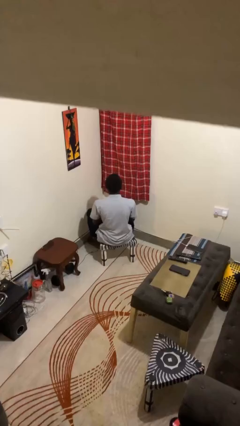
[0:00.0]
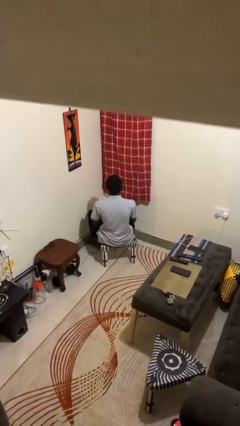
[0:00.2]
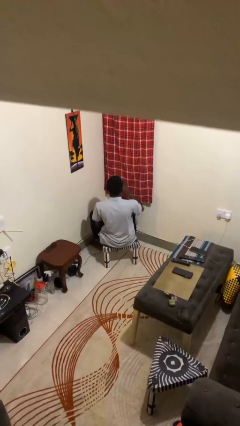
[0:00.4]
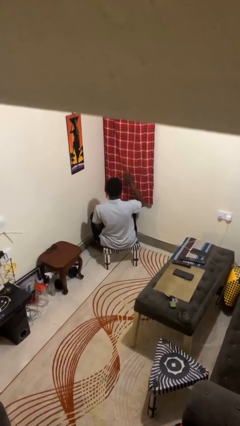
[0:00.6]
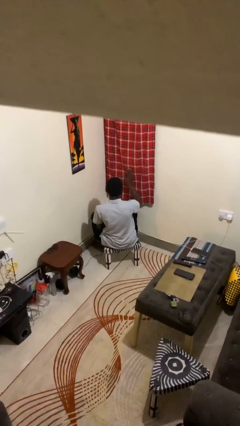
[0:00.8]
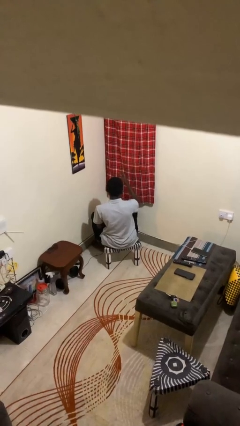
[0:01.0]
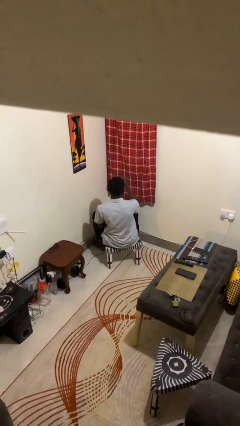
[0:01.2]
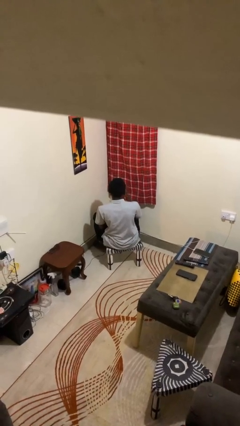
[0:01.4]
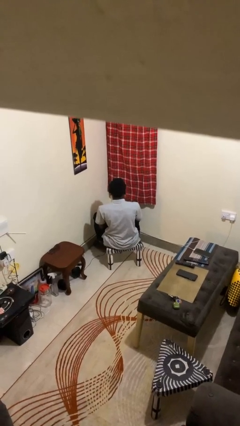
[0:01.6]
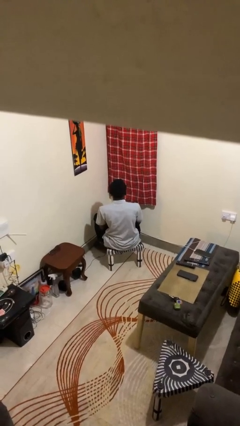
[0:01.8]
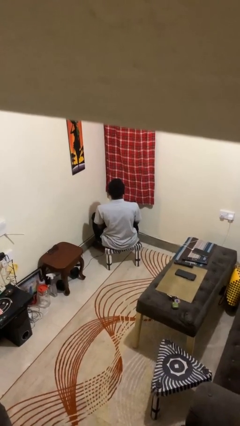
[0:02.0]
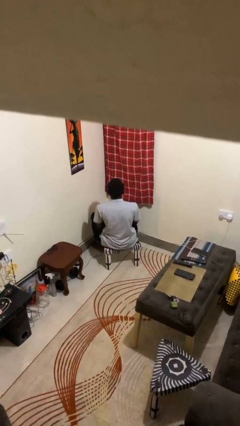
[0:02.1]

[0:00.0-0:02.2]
person gestures swipe left

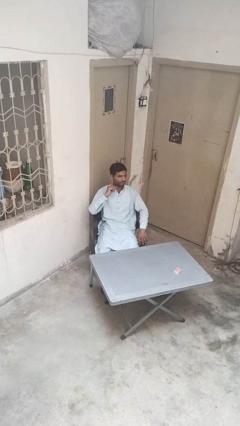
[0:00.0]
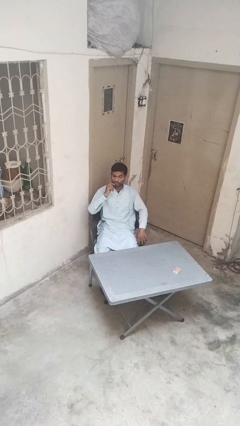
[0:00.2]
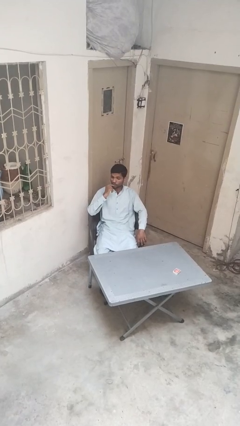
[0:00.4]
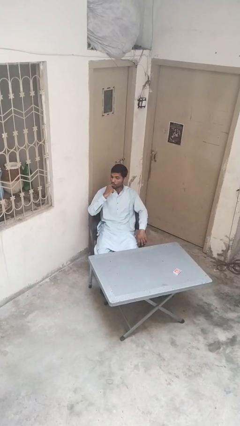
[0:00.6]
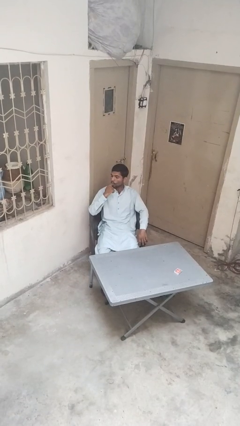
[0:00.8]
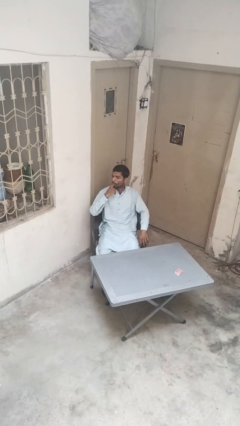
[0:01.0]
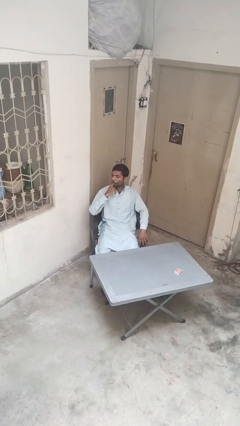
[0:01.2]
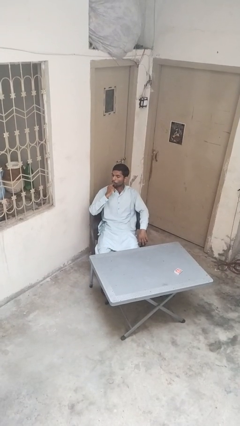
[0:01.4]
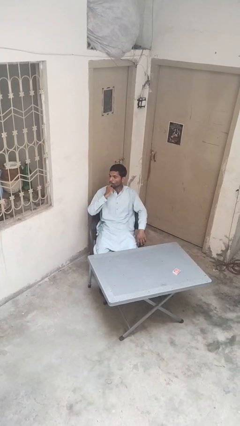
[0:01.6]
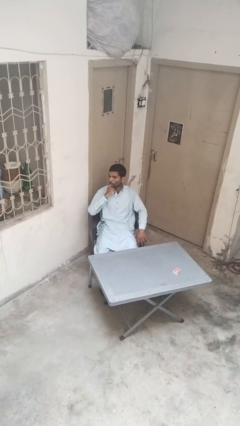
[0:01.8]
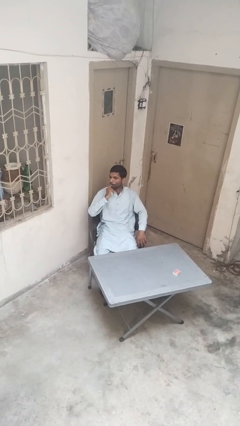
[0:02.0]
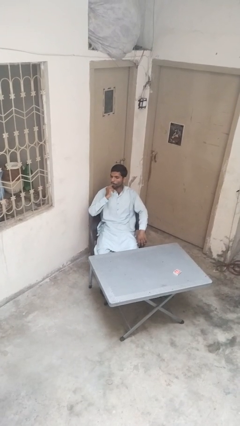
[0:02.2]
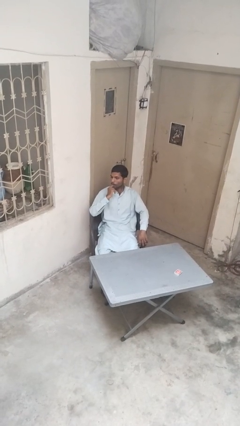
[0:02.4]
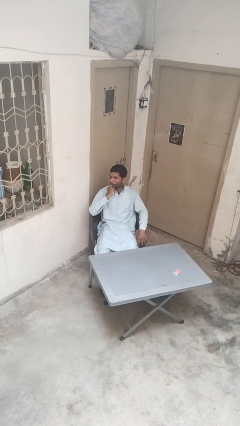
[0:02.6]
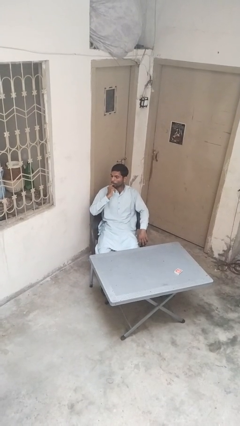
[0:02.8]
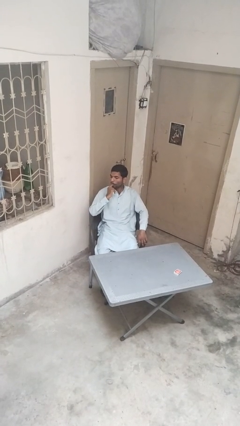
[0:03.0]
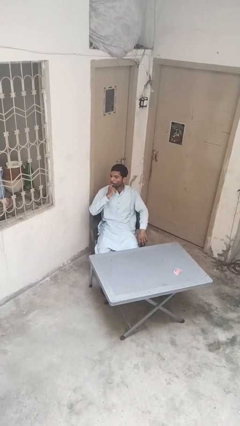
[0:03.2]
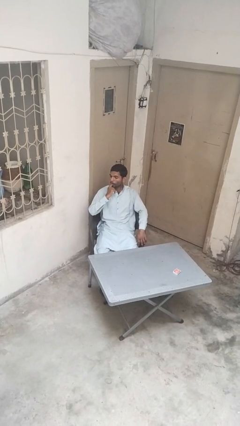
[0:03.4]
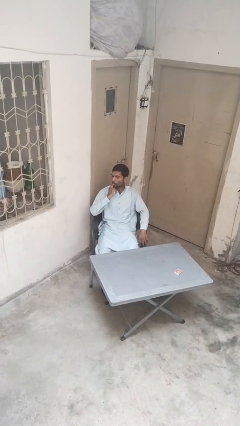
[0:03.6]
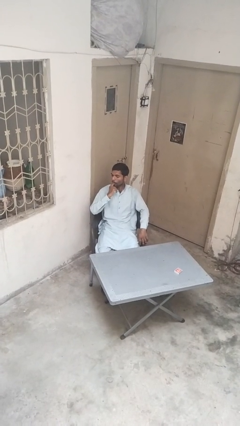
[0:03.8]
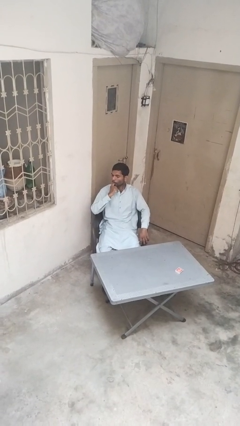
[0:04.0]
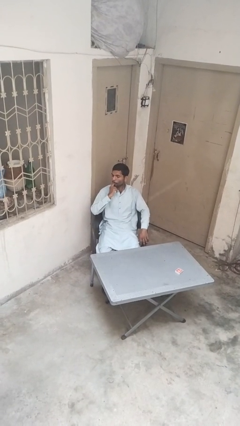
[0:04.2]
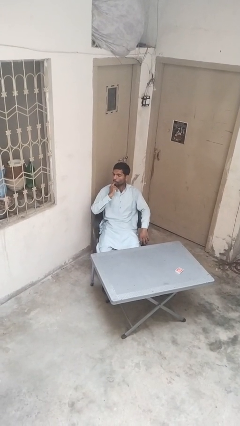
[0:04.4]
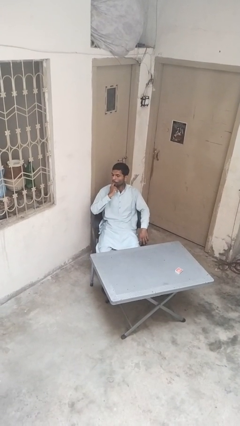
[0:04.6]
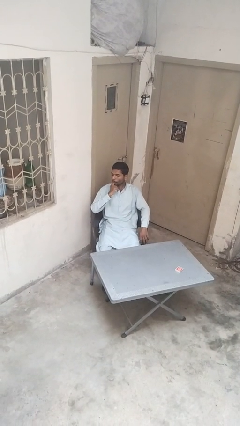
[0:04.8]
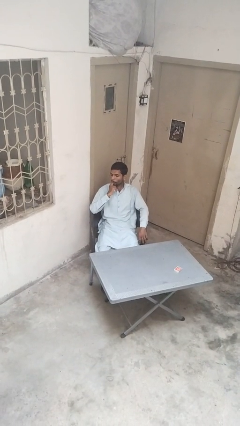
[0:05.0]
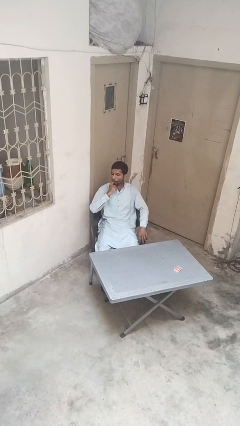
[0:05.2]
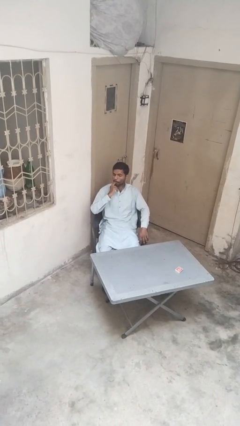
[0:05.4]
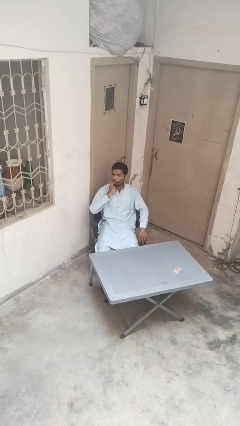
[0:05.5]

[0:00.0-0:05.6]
person licks fingers

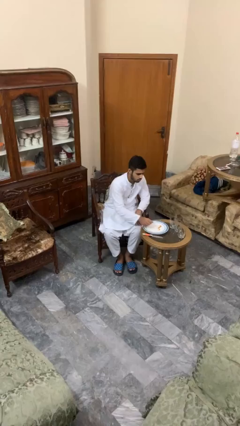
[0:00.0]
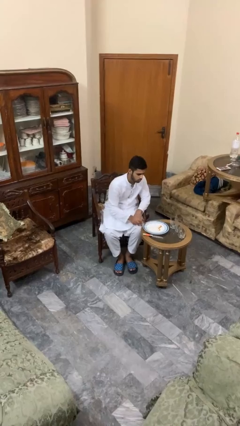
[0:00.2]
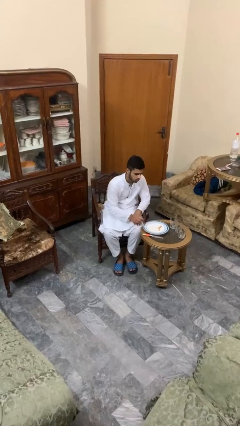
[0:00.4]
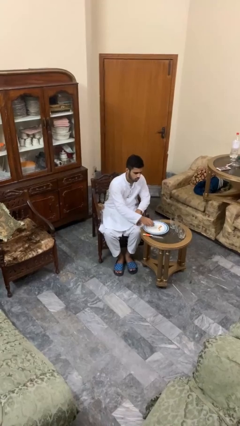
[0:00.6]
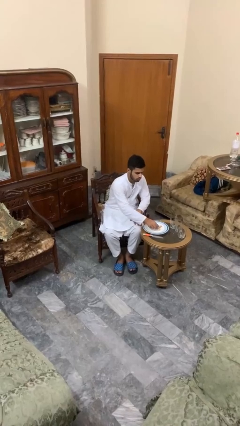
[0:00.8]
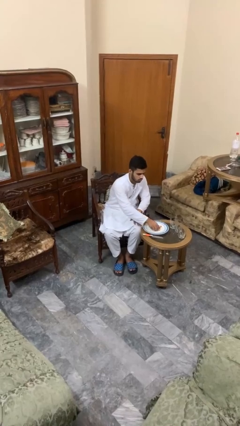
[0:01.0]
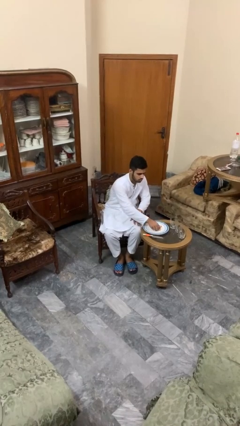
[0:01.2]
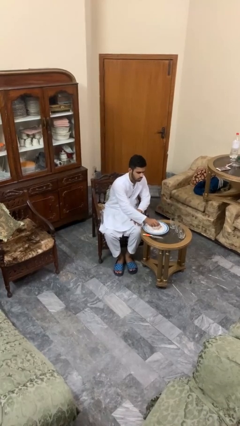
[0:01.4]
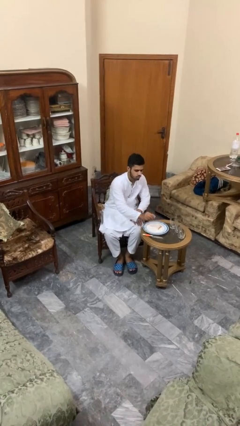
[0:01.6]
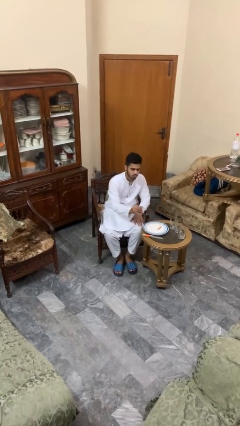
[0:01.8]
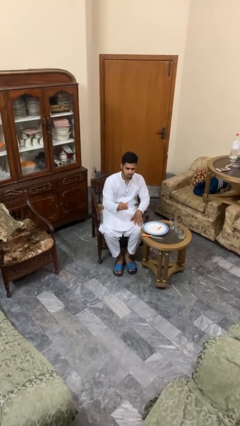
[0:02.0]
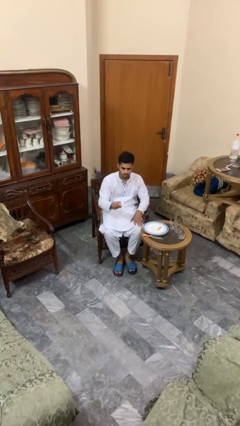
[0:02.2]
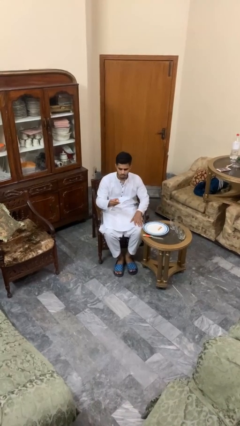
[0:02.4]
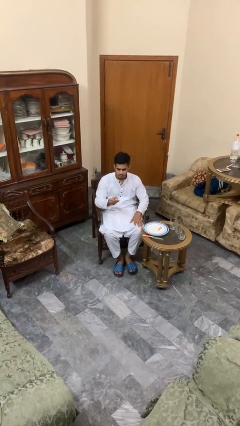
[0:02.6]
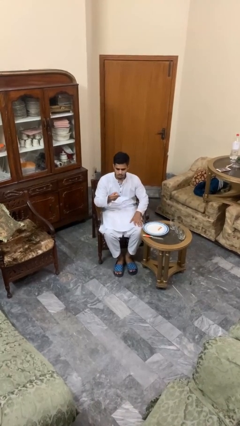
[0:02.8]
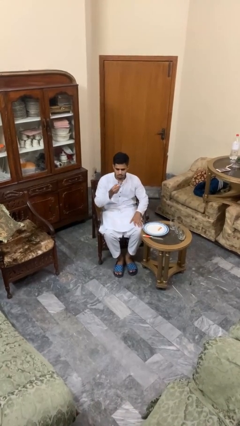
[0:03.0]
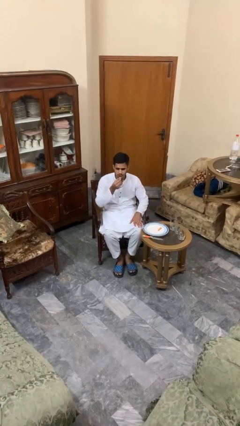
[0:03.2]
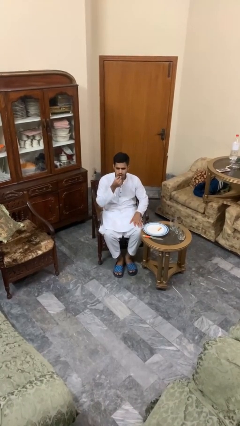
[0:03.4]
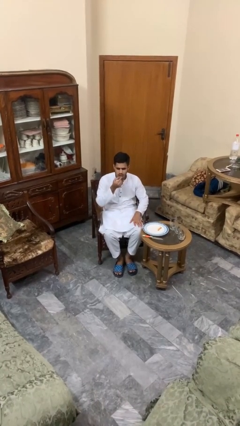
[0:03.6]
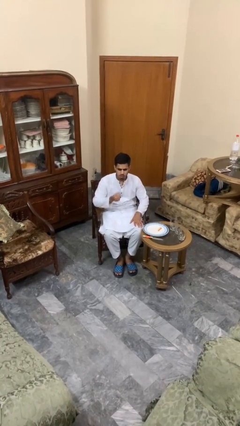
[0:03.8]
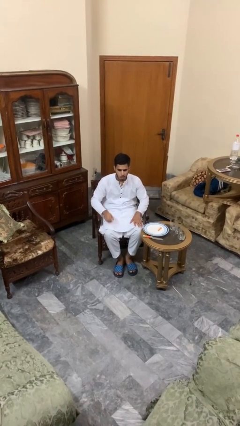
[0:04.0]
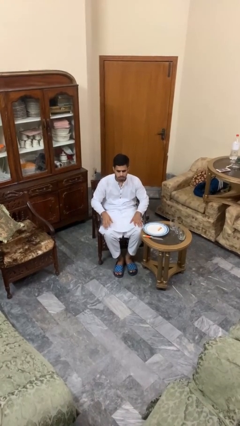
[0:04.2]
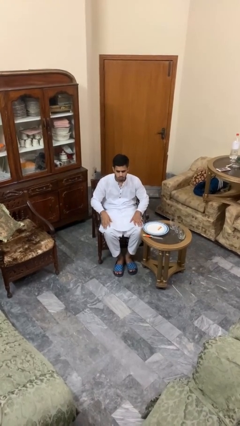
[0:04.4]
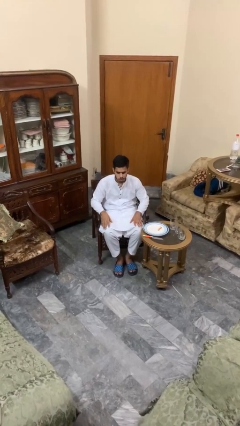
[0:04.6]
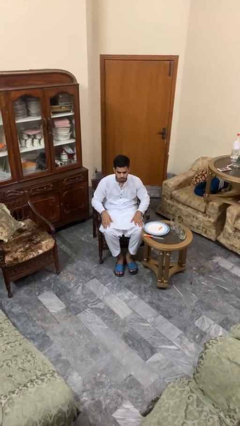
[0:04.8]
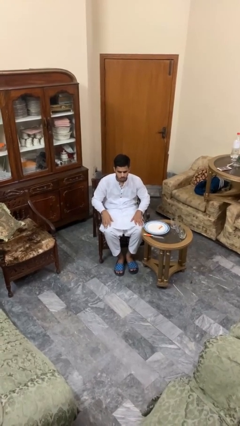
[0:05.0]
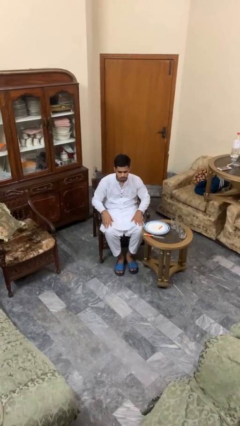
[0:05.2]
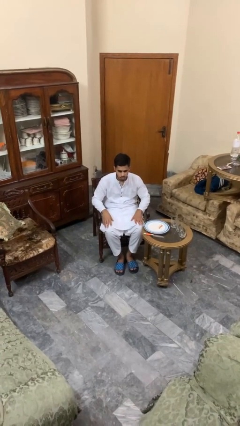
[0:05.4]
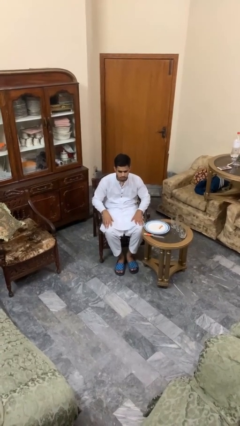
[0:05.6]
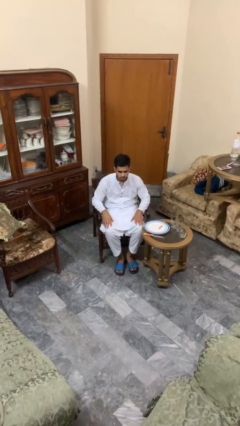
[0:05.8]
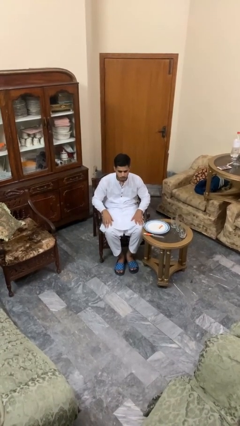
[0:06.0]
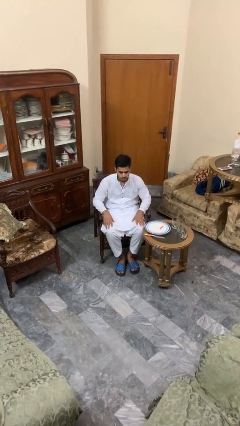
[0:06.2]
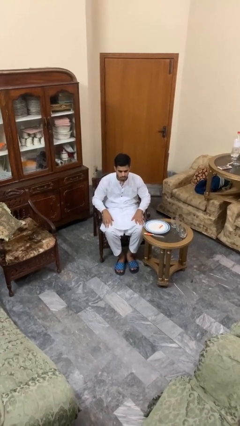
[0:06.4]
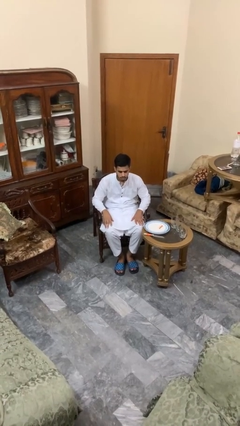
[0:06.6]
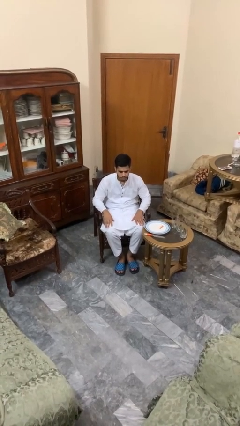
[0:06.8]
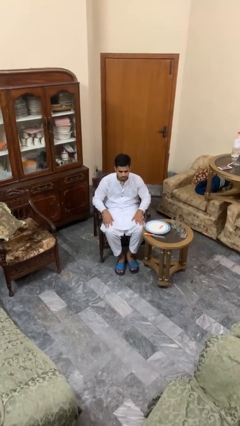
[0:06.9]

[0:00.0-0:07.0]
person eats with hands

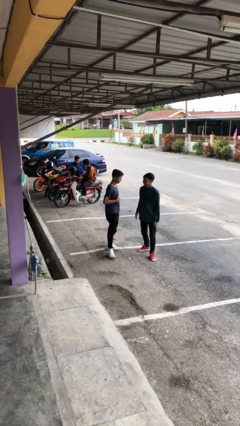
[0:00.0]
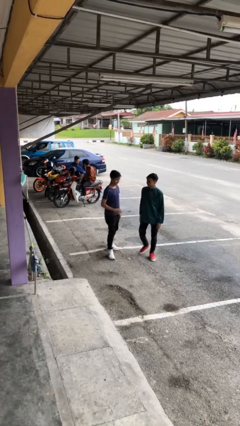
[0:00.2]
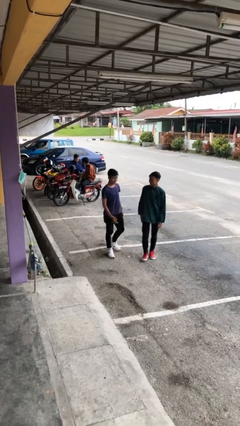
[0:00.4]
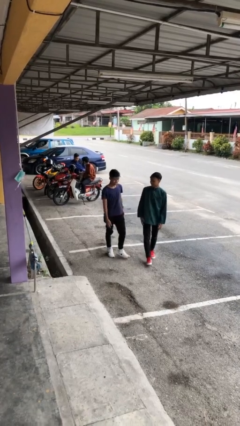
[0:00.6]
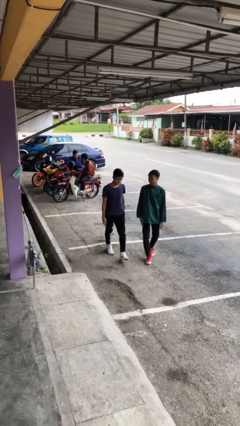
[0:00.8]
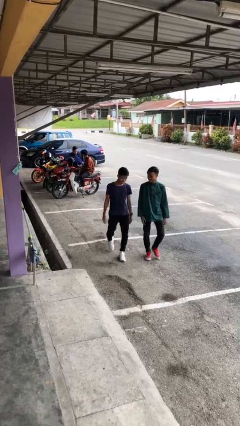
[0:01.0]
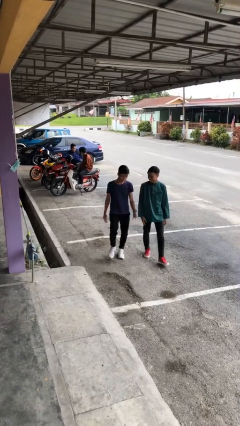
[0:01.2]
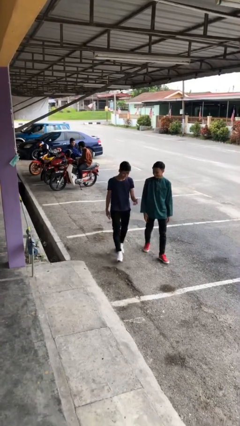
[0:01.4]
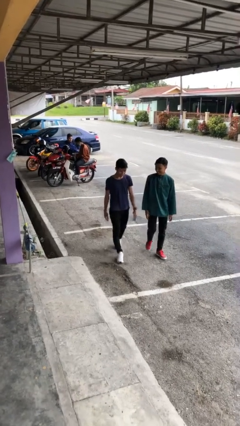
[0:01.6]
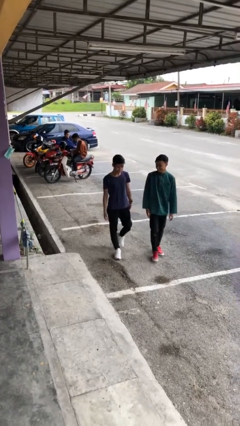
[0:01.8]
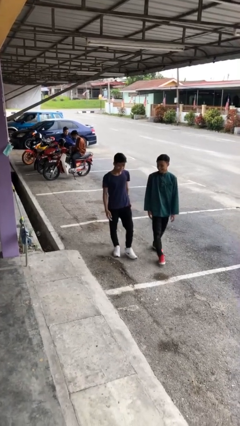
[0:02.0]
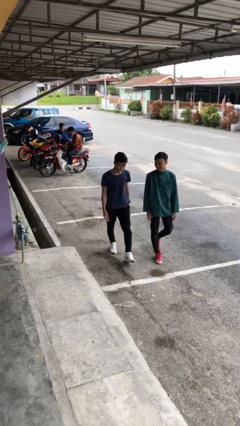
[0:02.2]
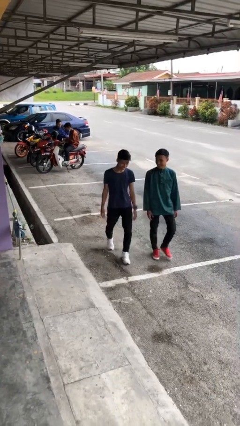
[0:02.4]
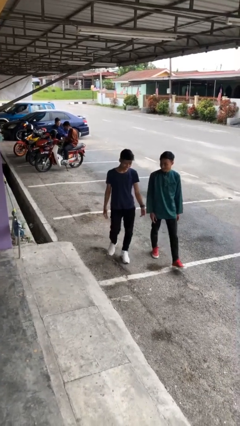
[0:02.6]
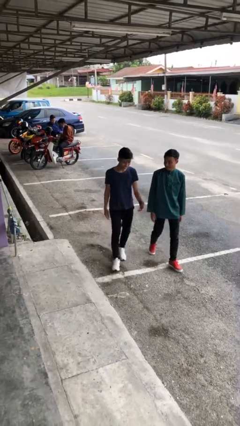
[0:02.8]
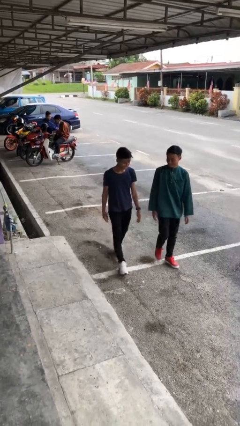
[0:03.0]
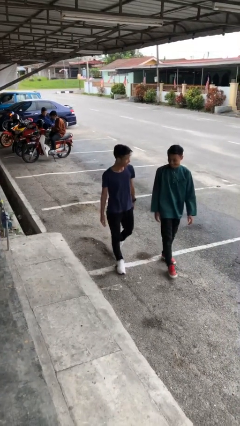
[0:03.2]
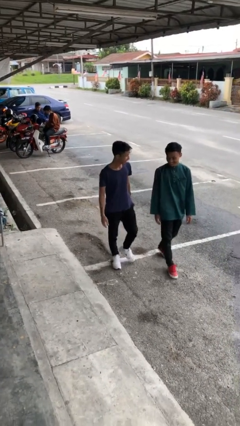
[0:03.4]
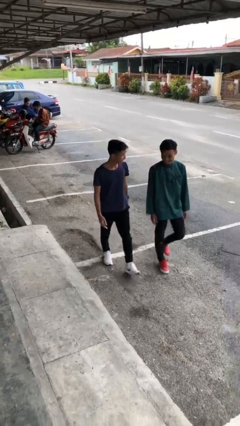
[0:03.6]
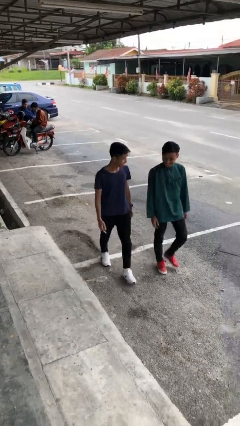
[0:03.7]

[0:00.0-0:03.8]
person talks to person
